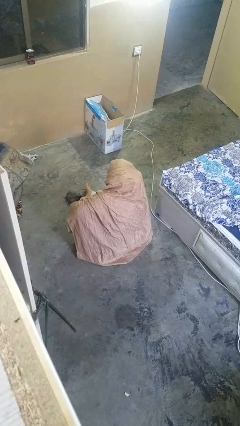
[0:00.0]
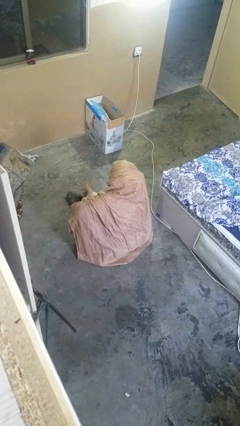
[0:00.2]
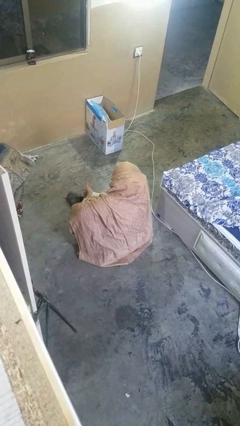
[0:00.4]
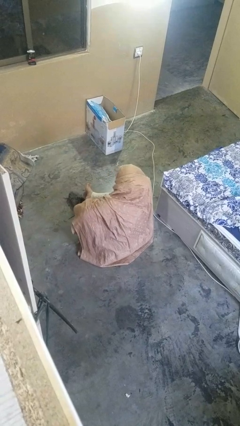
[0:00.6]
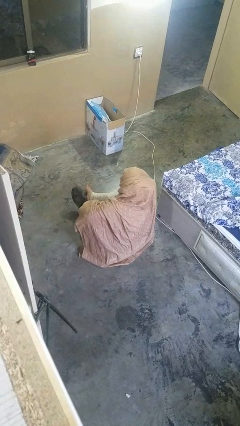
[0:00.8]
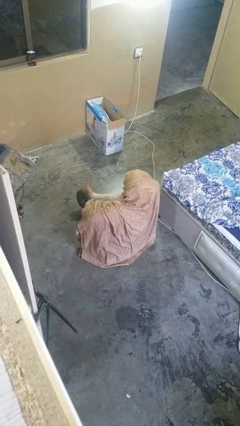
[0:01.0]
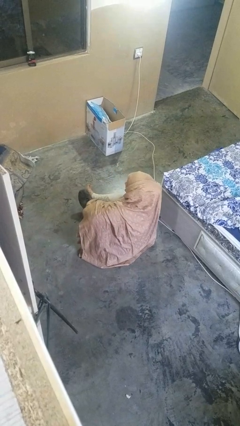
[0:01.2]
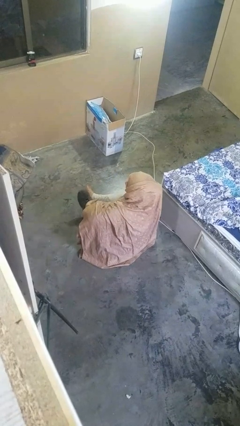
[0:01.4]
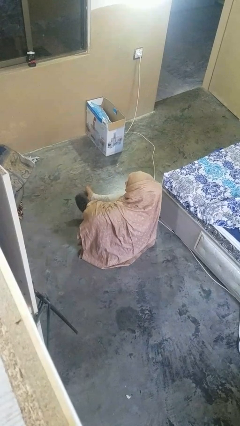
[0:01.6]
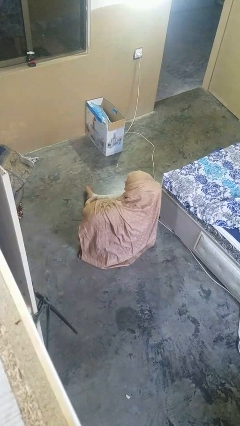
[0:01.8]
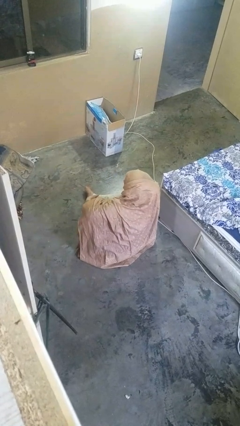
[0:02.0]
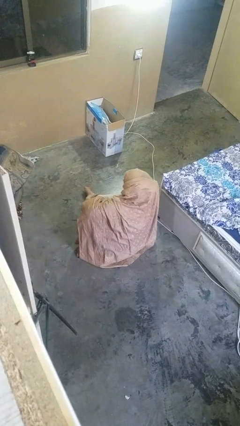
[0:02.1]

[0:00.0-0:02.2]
person puts on shoes

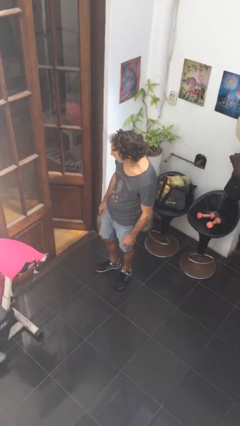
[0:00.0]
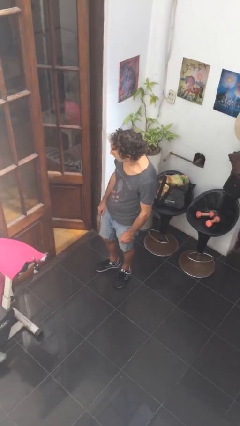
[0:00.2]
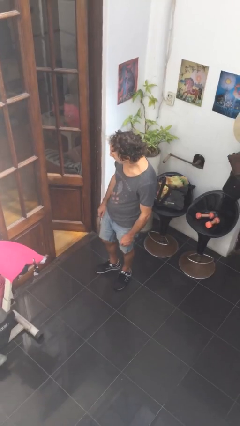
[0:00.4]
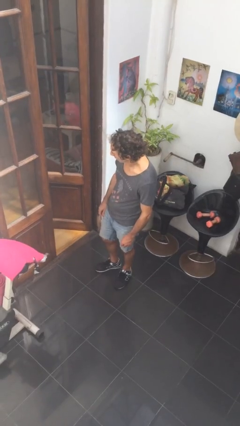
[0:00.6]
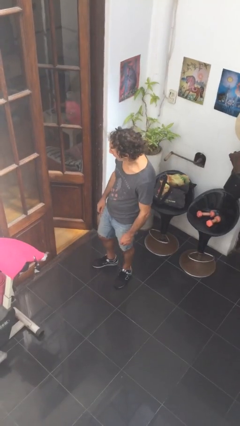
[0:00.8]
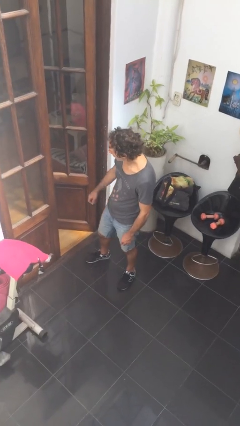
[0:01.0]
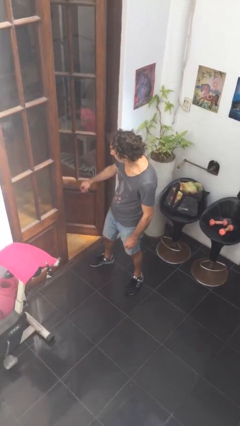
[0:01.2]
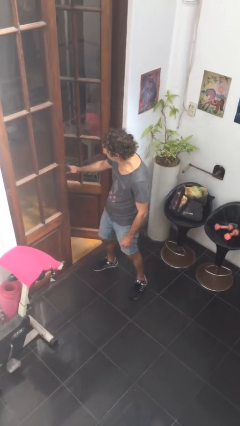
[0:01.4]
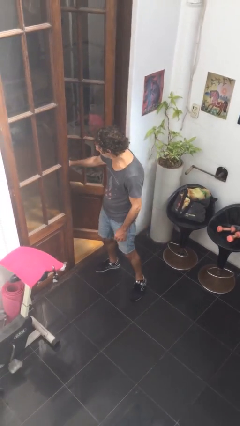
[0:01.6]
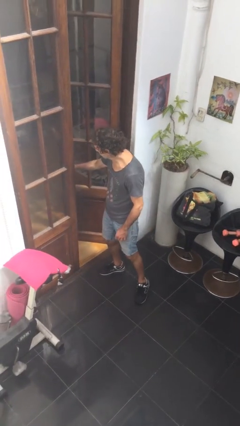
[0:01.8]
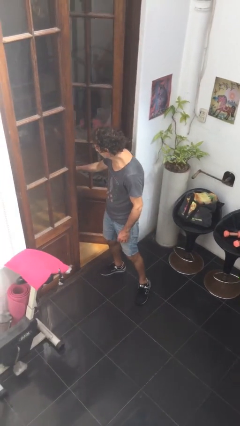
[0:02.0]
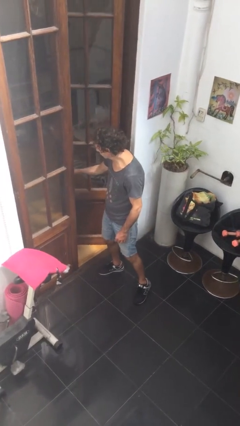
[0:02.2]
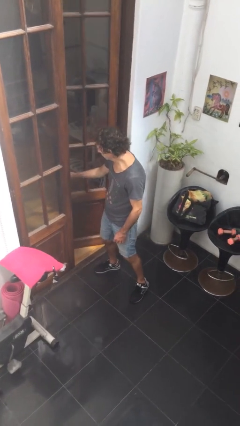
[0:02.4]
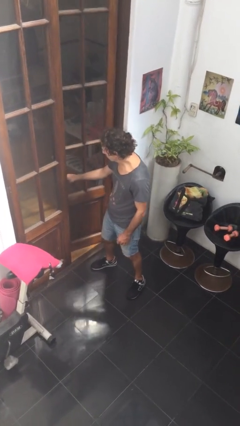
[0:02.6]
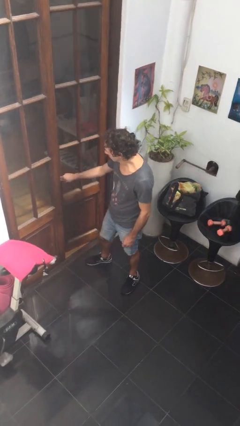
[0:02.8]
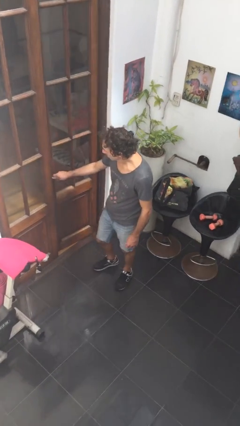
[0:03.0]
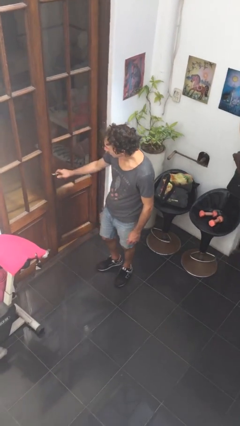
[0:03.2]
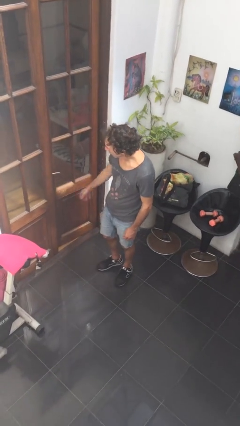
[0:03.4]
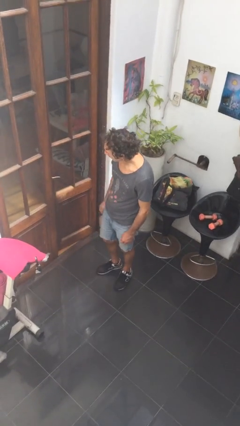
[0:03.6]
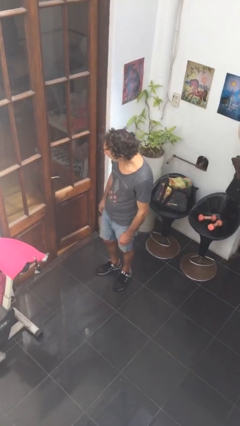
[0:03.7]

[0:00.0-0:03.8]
person closes facility door

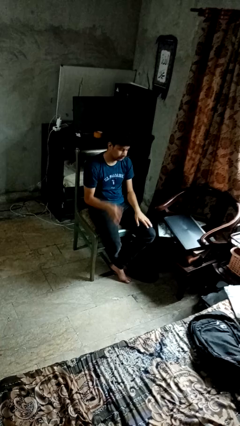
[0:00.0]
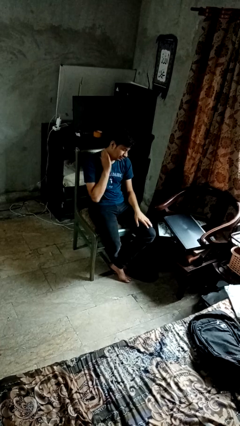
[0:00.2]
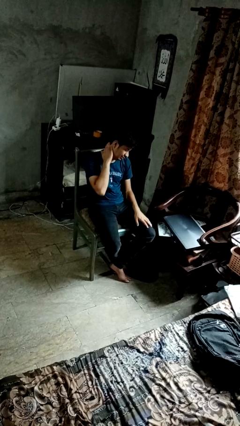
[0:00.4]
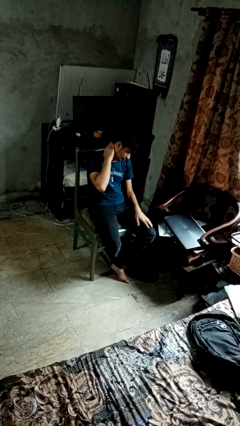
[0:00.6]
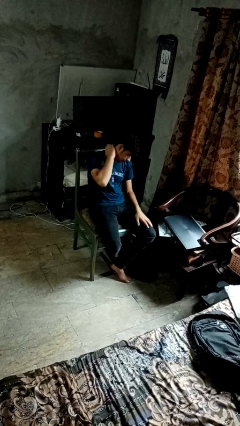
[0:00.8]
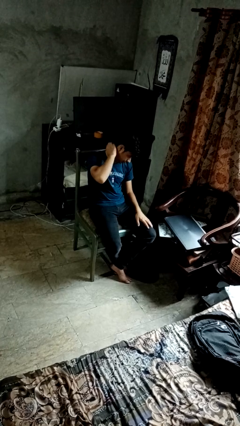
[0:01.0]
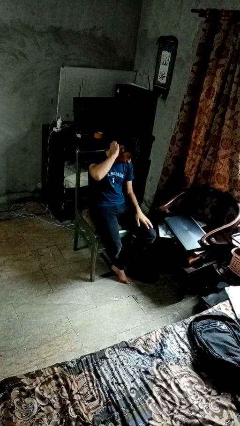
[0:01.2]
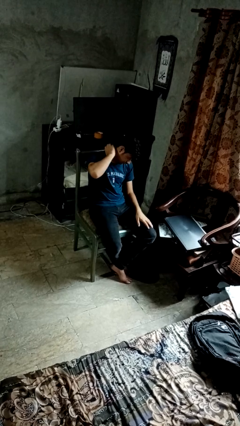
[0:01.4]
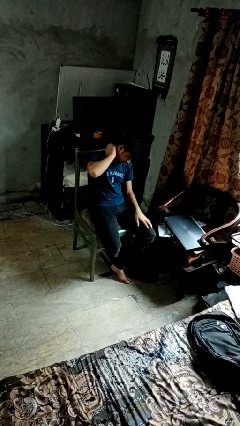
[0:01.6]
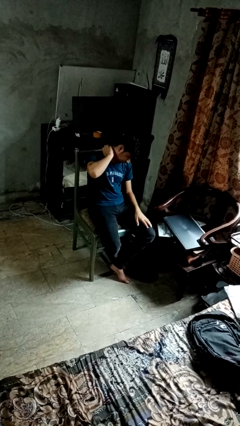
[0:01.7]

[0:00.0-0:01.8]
person swats bug

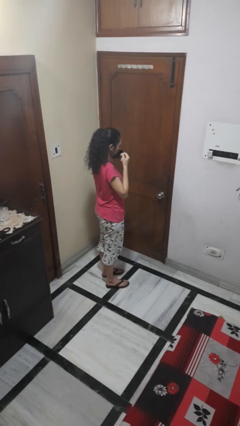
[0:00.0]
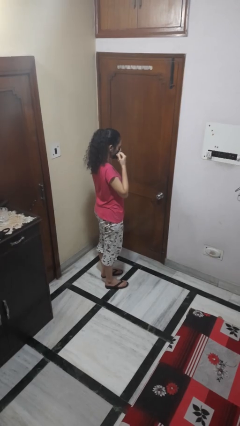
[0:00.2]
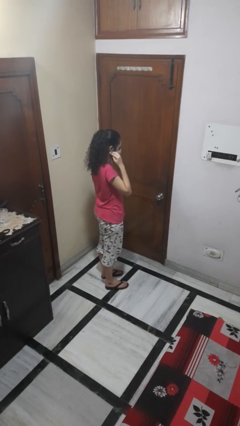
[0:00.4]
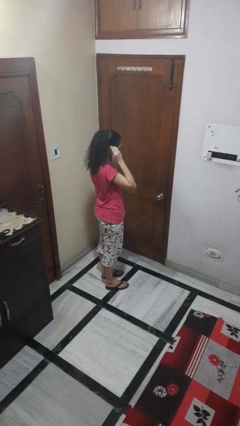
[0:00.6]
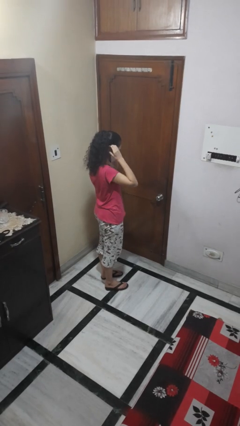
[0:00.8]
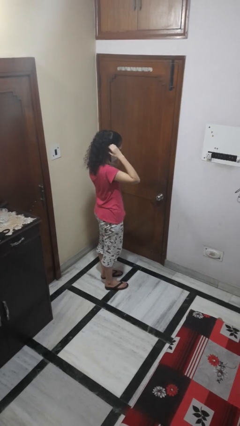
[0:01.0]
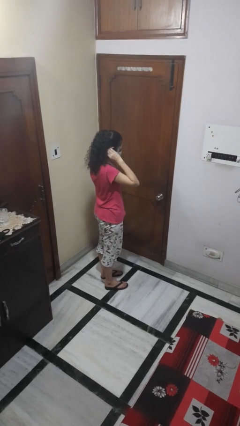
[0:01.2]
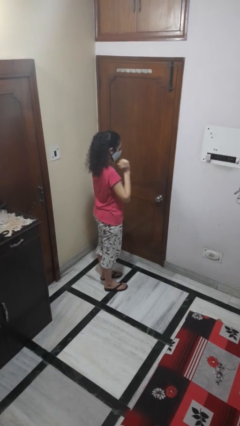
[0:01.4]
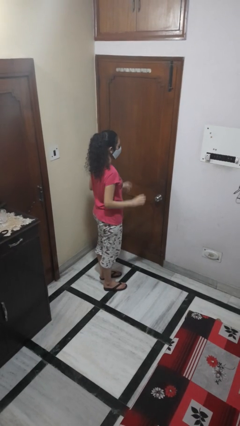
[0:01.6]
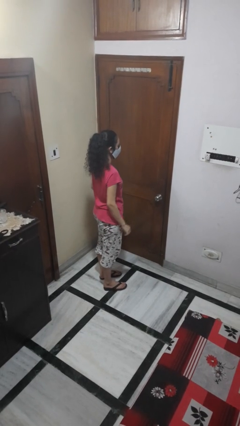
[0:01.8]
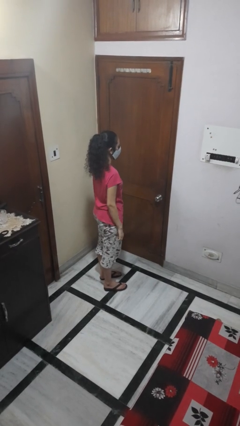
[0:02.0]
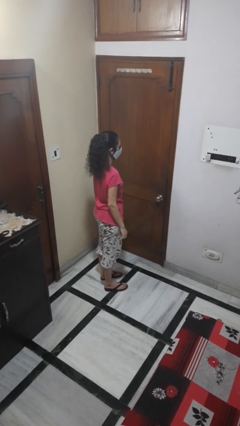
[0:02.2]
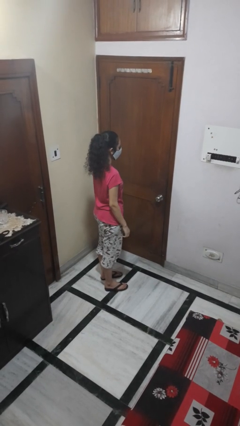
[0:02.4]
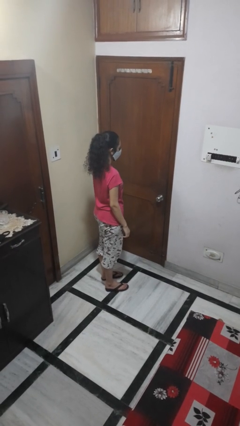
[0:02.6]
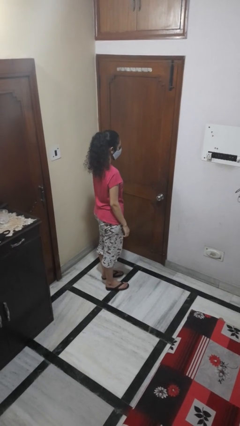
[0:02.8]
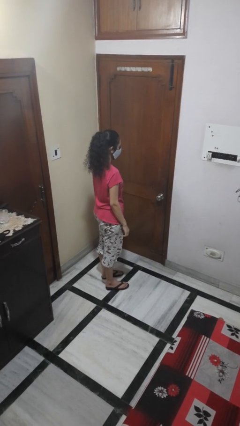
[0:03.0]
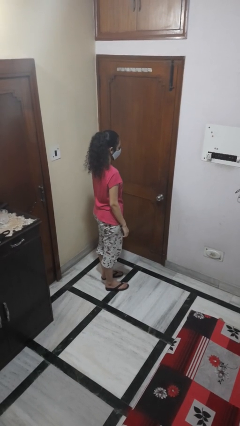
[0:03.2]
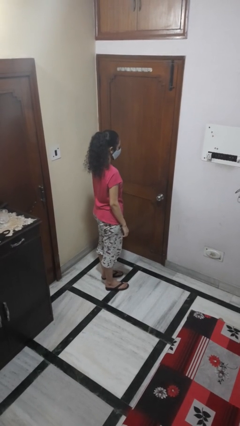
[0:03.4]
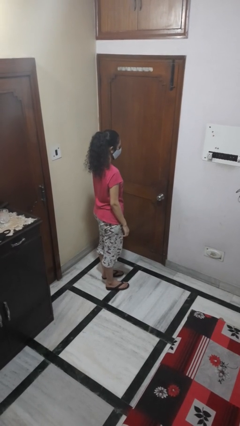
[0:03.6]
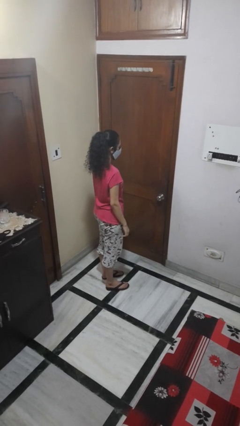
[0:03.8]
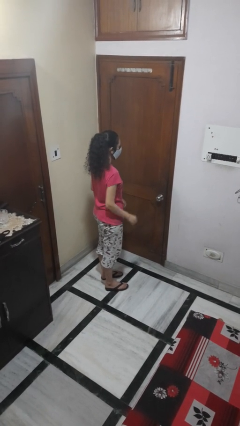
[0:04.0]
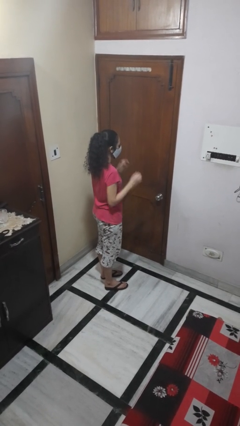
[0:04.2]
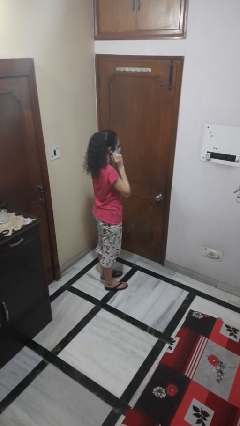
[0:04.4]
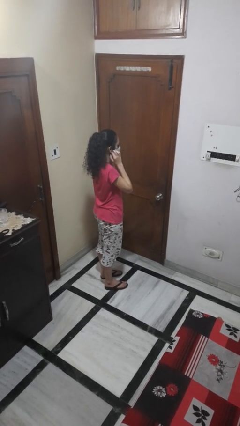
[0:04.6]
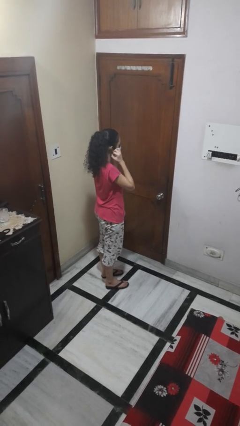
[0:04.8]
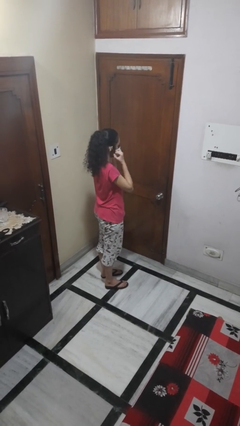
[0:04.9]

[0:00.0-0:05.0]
person puts on facemask

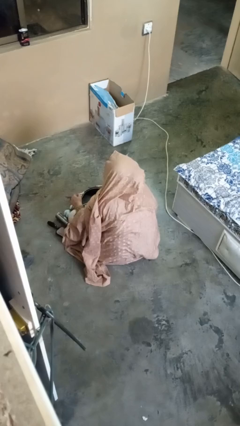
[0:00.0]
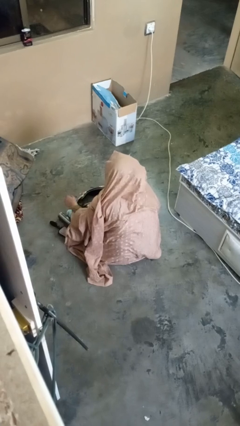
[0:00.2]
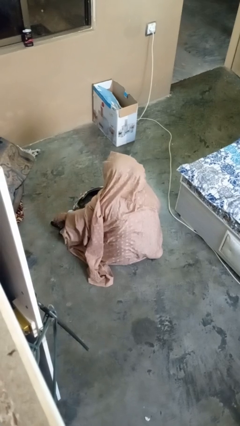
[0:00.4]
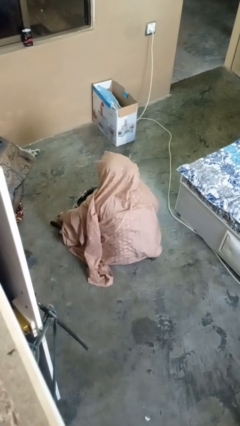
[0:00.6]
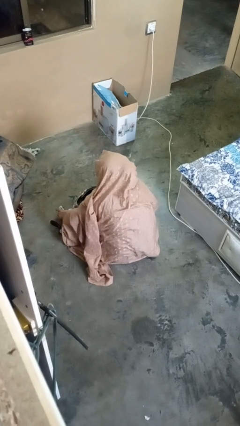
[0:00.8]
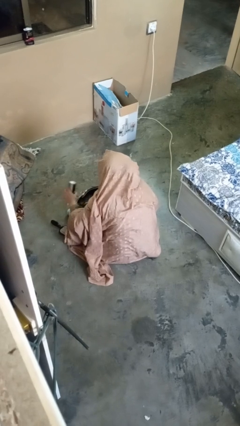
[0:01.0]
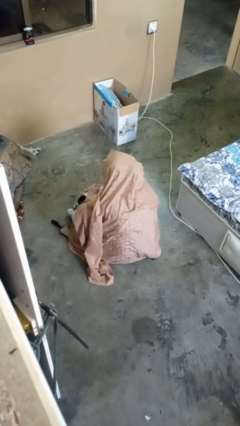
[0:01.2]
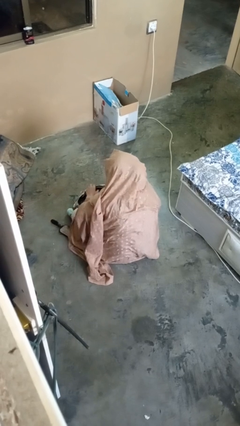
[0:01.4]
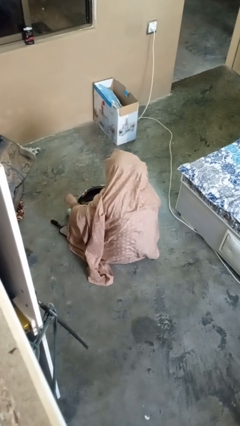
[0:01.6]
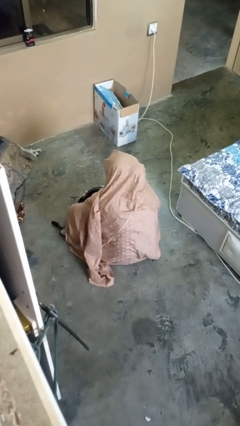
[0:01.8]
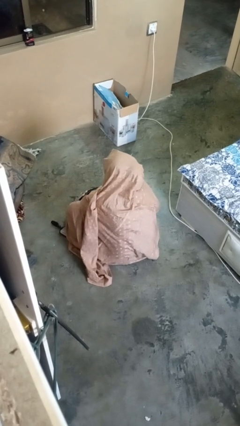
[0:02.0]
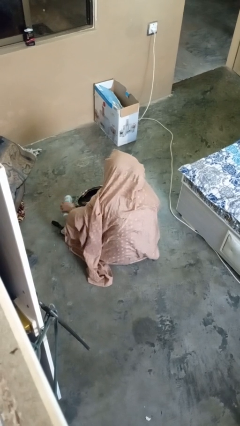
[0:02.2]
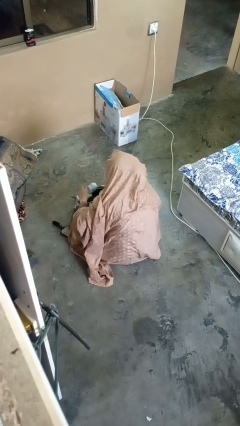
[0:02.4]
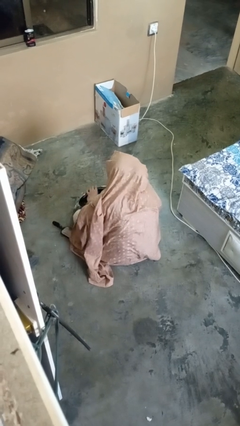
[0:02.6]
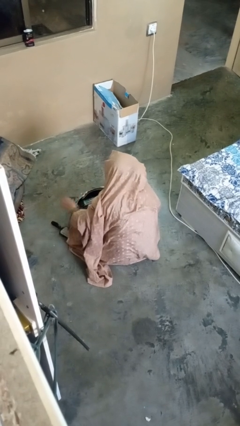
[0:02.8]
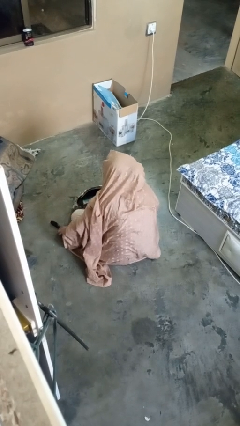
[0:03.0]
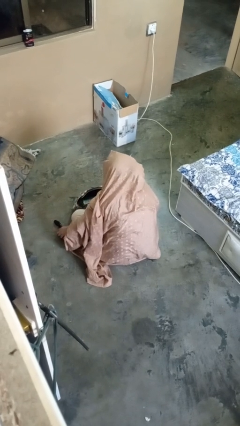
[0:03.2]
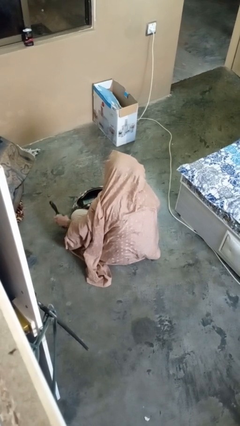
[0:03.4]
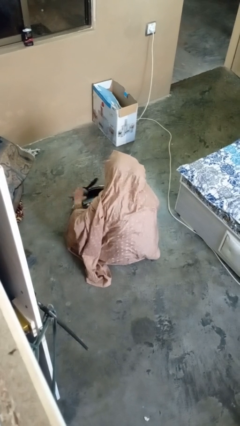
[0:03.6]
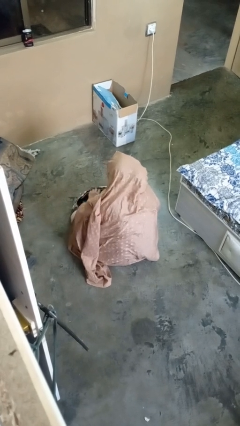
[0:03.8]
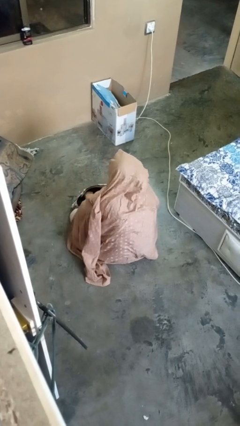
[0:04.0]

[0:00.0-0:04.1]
person puts object into purse

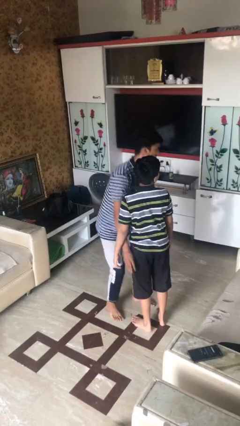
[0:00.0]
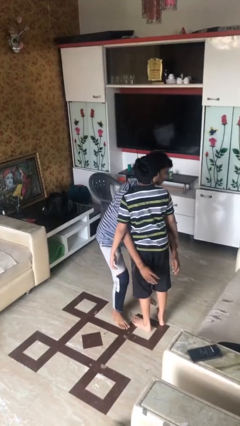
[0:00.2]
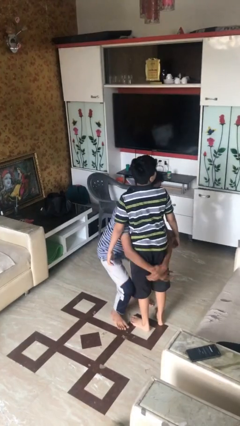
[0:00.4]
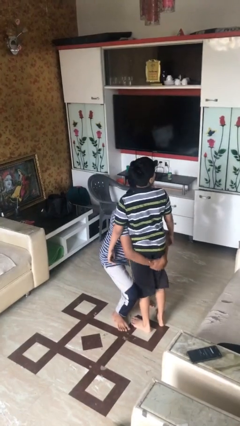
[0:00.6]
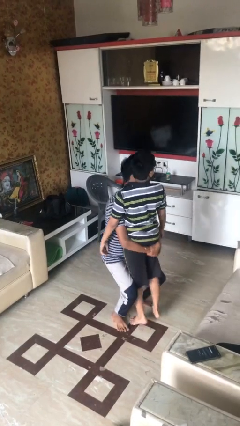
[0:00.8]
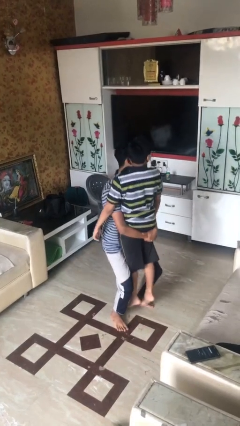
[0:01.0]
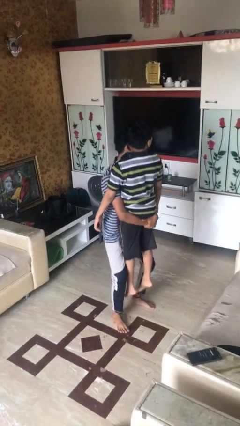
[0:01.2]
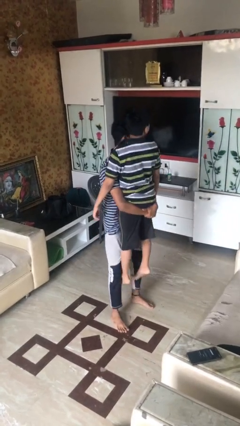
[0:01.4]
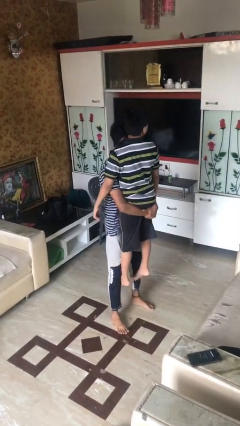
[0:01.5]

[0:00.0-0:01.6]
person picks up person
